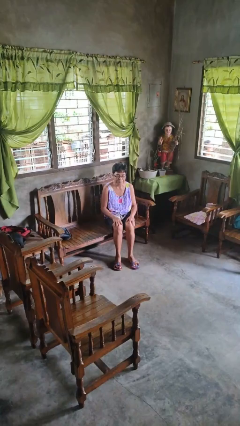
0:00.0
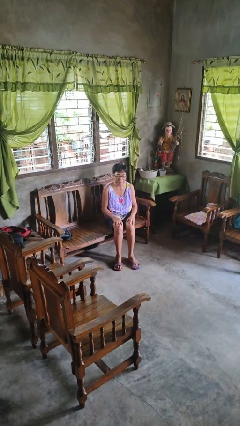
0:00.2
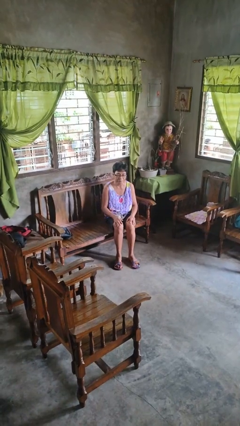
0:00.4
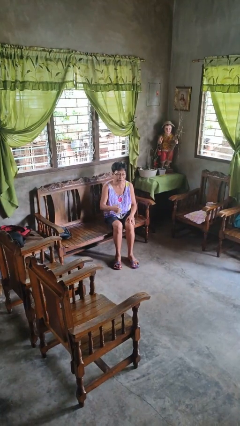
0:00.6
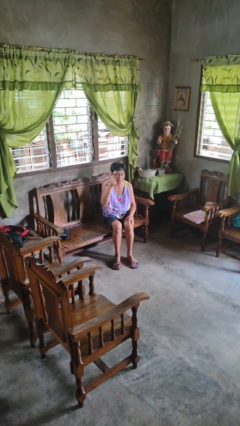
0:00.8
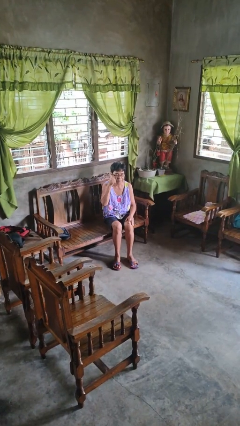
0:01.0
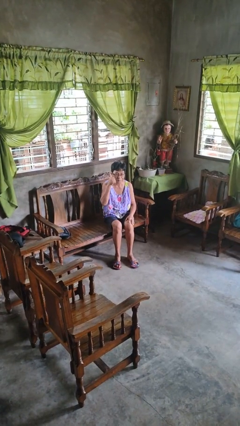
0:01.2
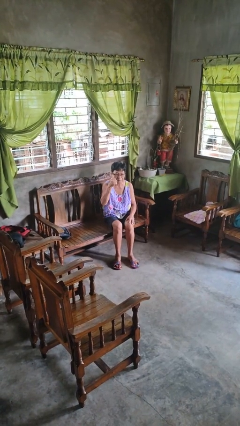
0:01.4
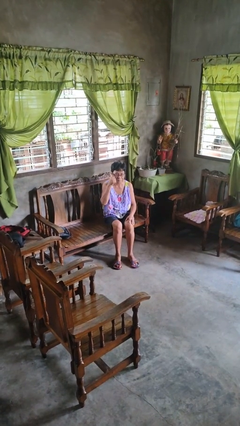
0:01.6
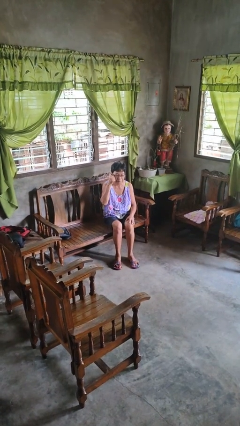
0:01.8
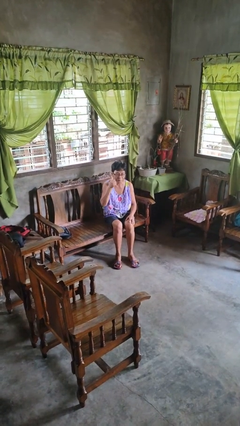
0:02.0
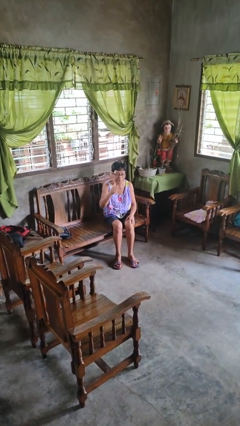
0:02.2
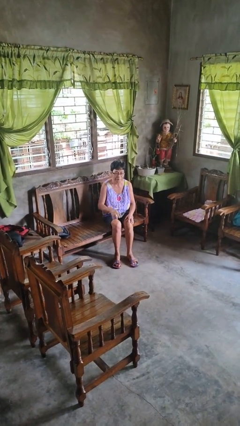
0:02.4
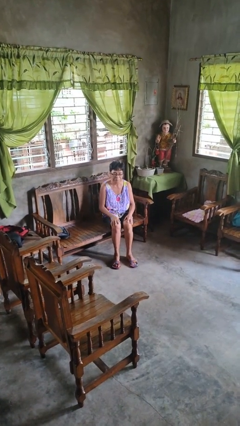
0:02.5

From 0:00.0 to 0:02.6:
person gestures behind me

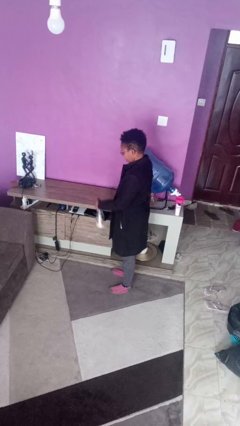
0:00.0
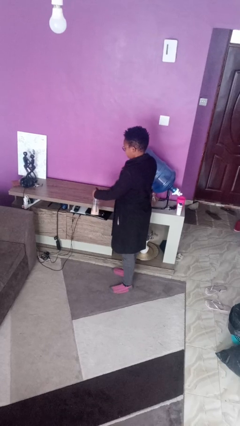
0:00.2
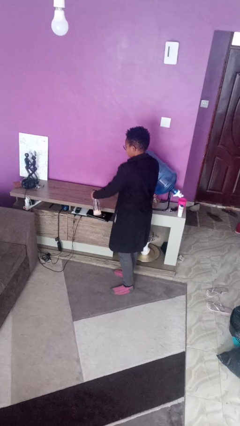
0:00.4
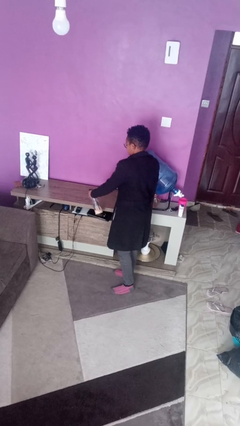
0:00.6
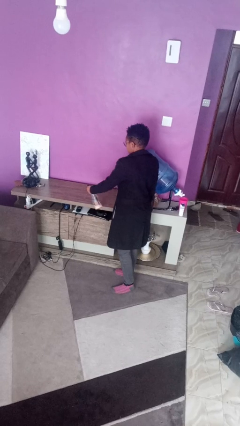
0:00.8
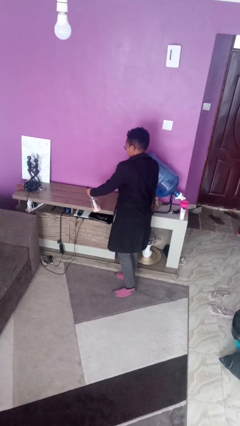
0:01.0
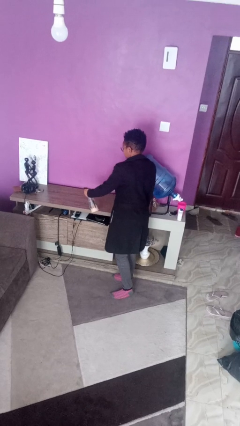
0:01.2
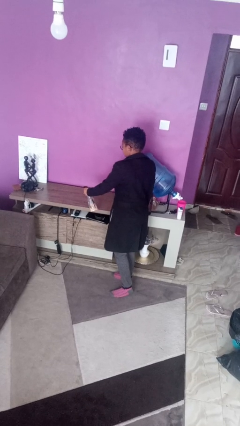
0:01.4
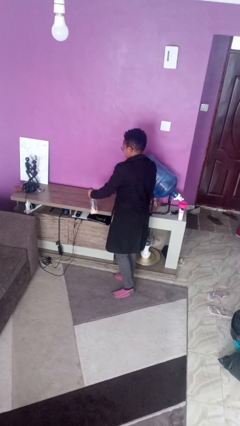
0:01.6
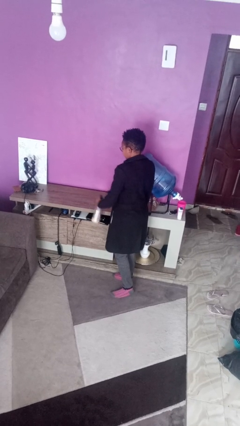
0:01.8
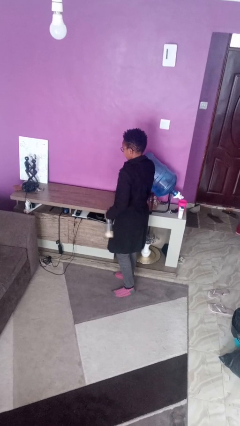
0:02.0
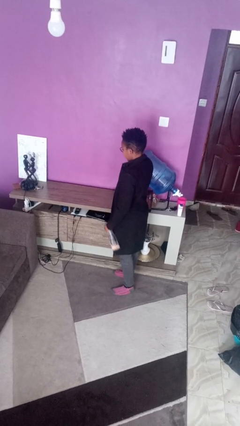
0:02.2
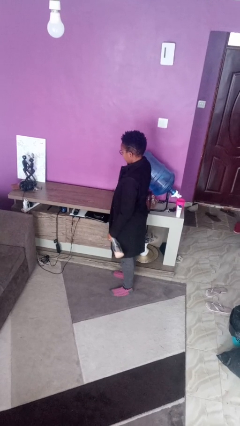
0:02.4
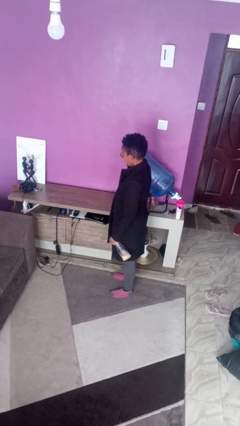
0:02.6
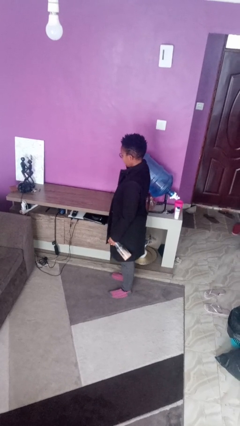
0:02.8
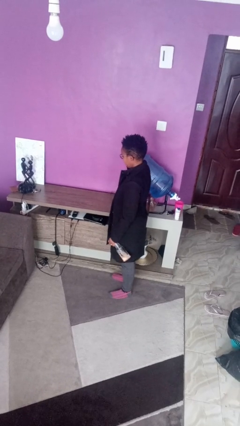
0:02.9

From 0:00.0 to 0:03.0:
person sprays from bottle

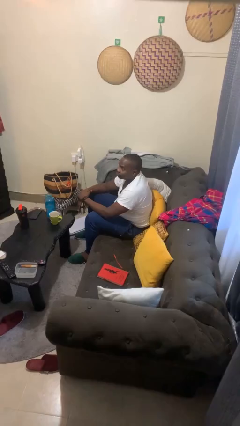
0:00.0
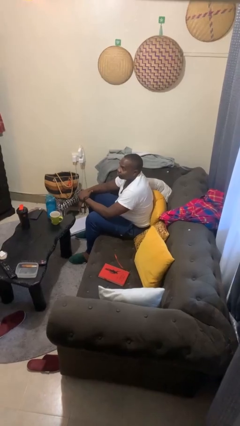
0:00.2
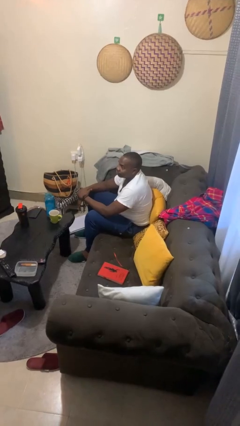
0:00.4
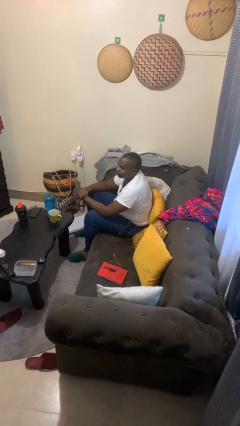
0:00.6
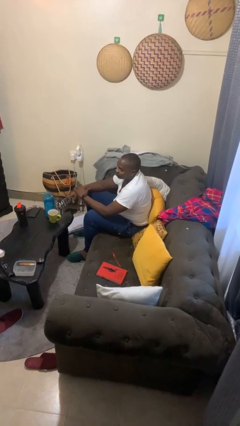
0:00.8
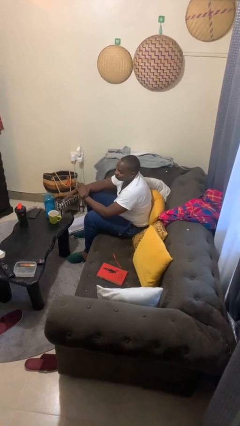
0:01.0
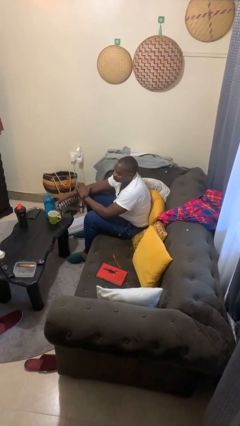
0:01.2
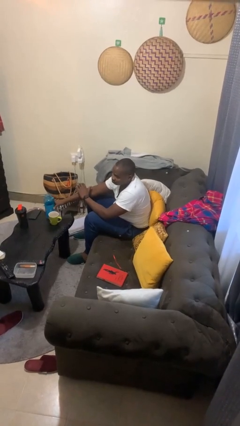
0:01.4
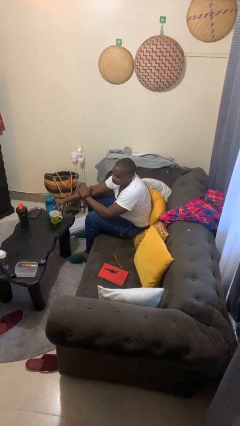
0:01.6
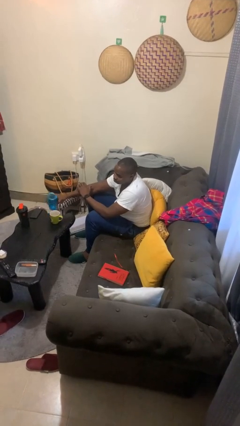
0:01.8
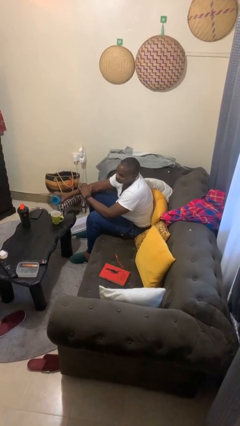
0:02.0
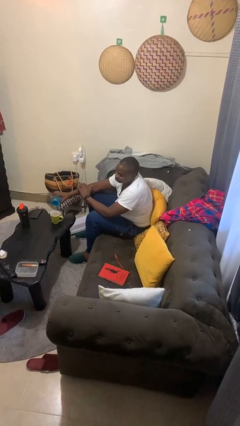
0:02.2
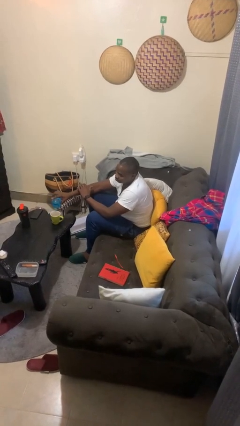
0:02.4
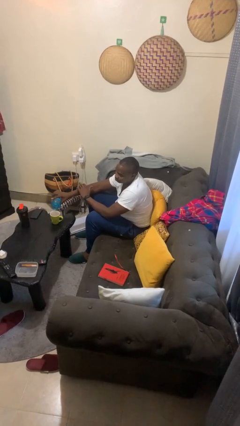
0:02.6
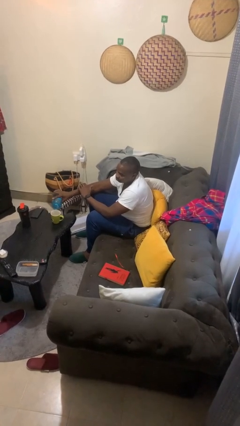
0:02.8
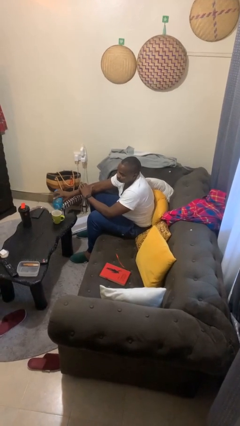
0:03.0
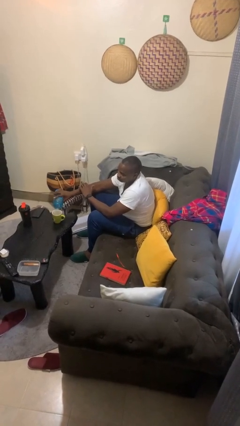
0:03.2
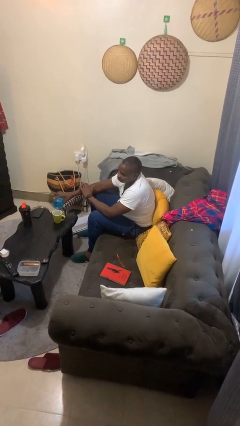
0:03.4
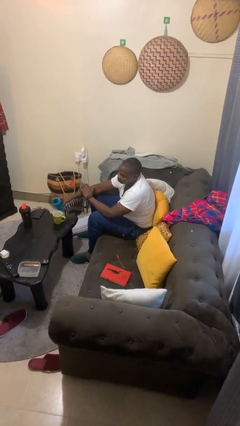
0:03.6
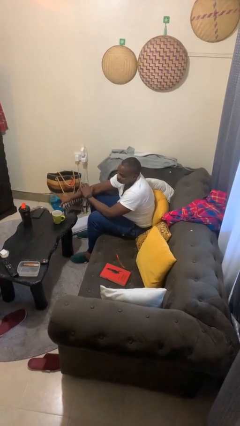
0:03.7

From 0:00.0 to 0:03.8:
person pours liquid into cup

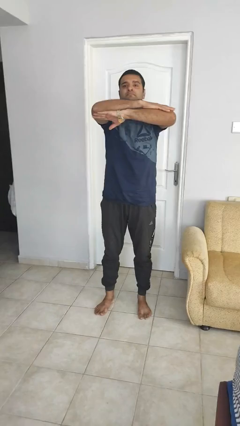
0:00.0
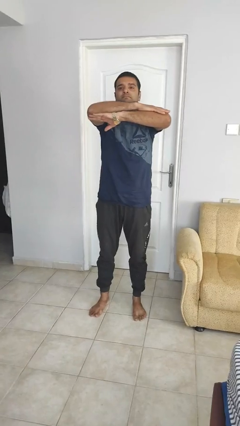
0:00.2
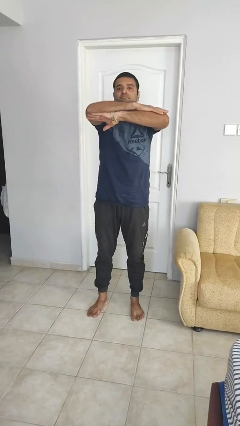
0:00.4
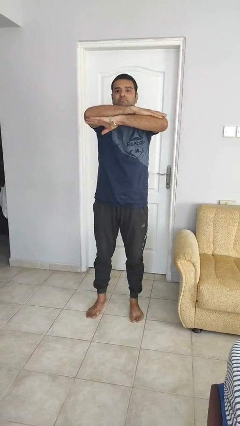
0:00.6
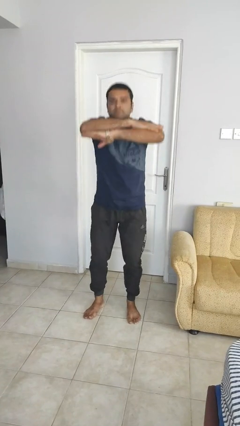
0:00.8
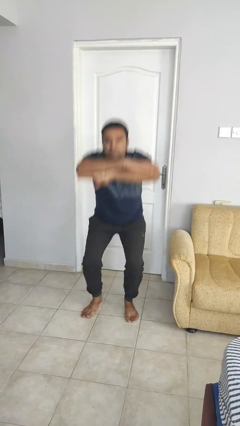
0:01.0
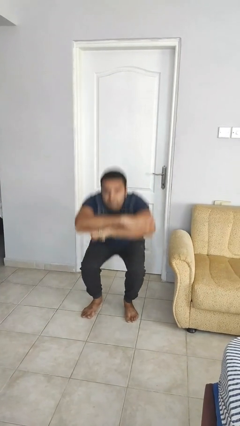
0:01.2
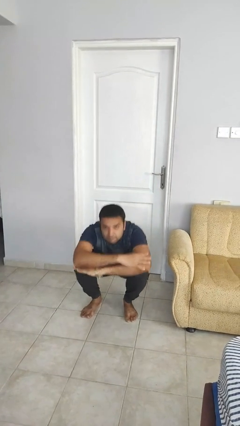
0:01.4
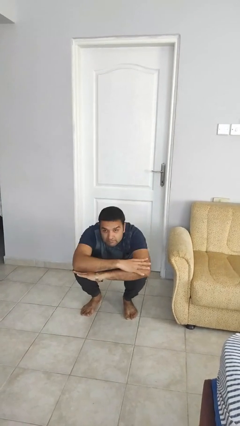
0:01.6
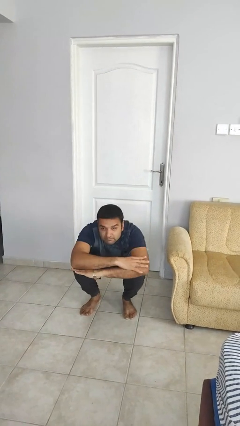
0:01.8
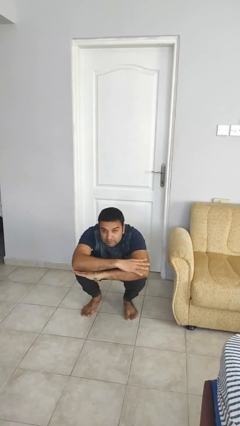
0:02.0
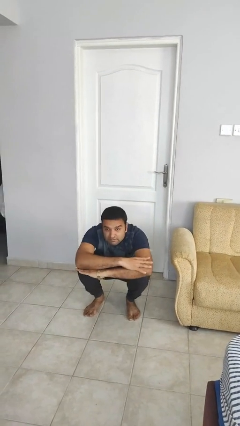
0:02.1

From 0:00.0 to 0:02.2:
person squats

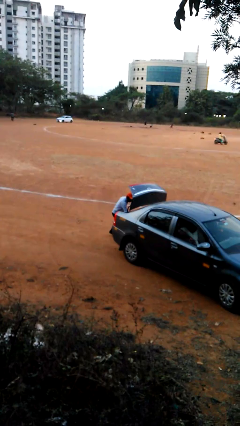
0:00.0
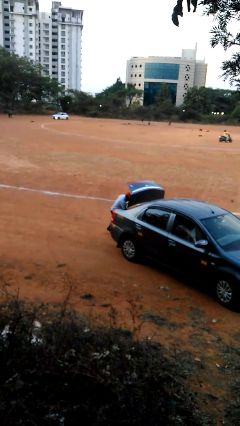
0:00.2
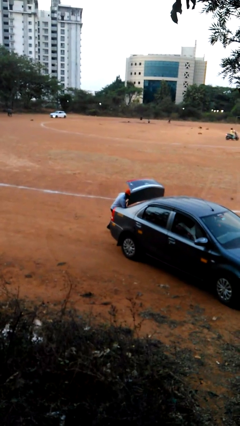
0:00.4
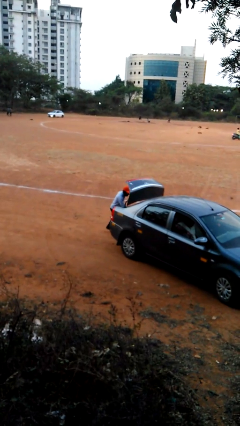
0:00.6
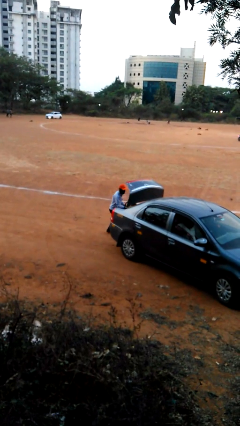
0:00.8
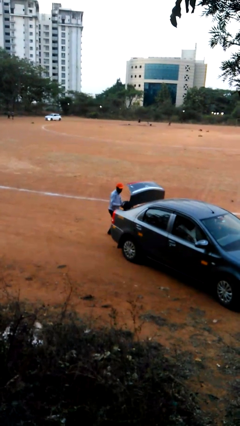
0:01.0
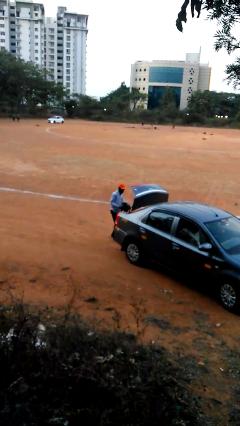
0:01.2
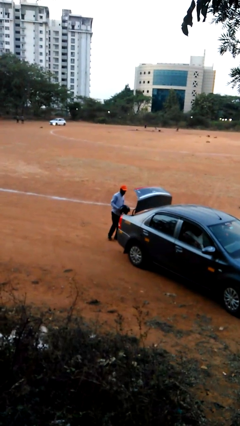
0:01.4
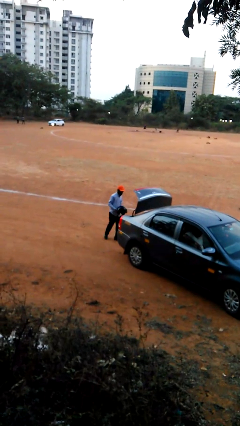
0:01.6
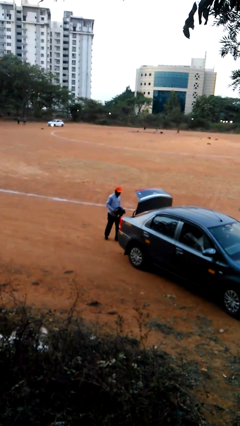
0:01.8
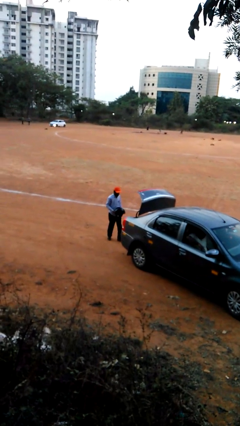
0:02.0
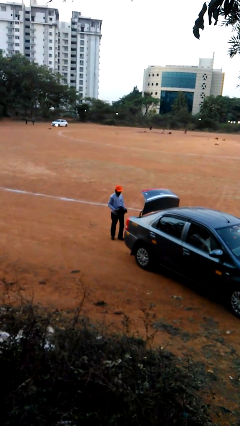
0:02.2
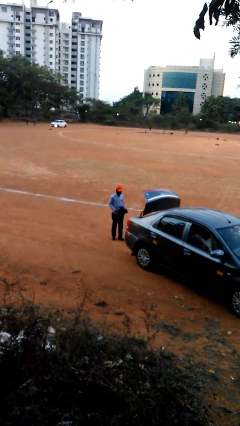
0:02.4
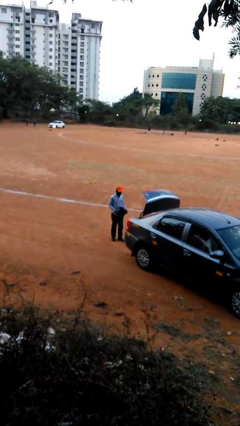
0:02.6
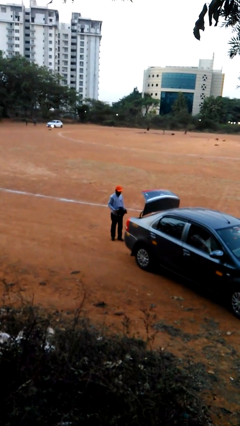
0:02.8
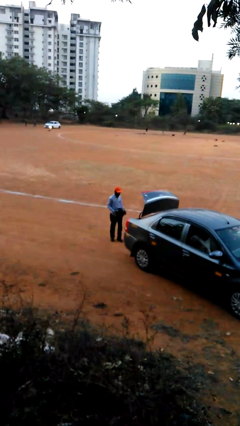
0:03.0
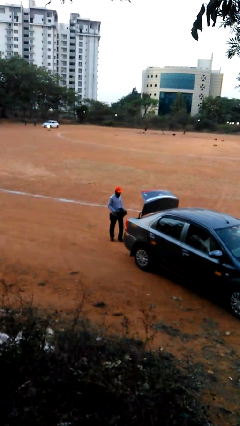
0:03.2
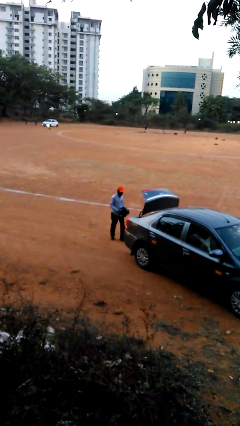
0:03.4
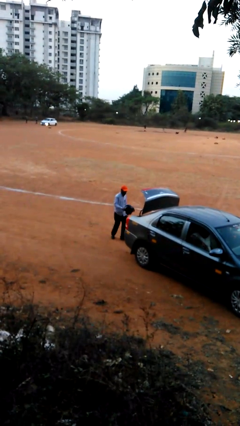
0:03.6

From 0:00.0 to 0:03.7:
person unloads car

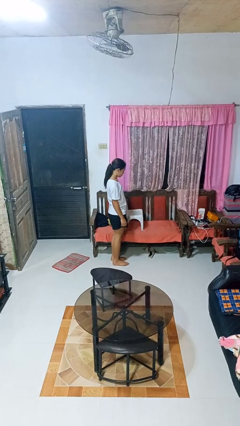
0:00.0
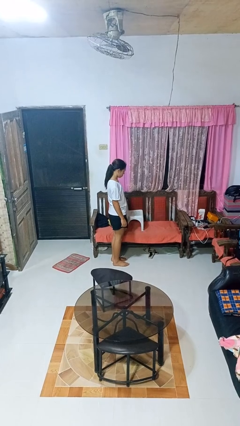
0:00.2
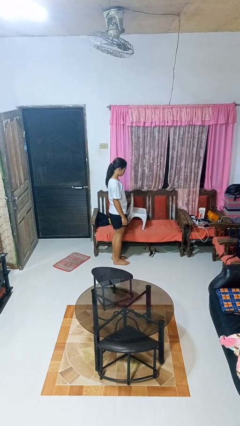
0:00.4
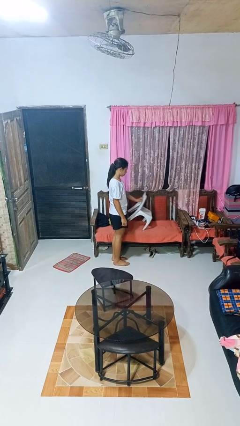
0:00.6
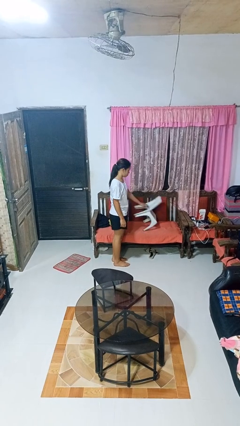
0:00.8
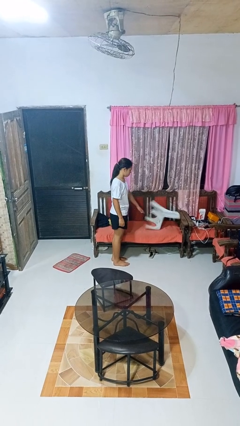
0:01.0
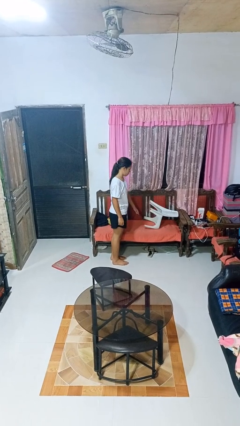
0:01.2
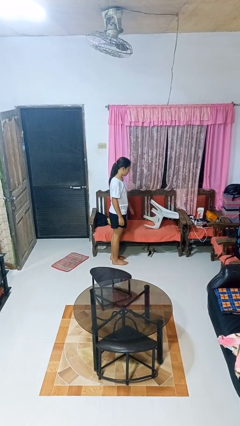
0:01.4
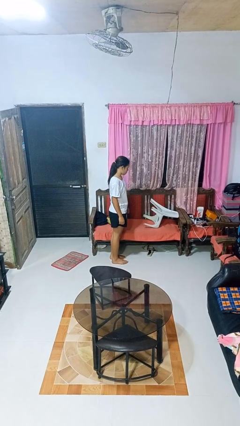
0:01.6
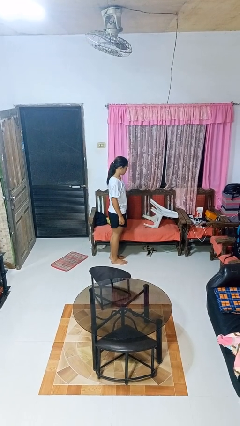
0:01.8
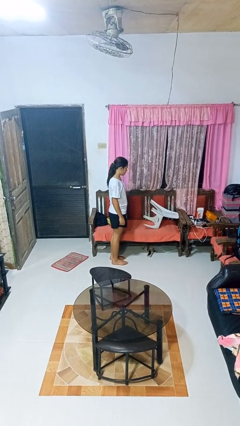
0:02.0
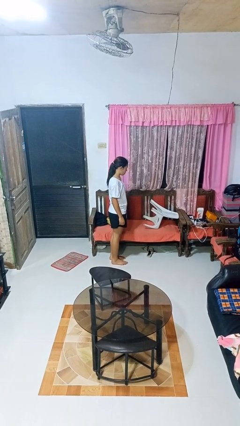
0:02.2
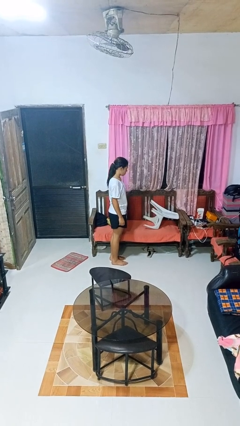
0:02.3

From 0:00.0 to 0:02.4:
person knocks over furniture
